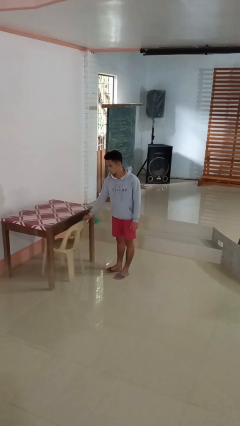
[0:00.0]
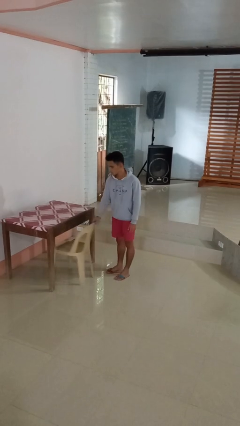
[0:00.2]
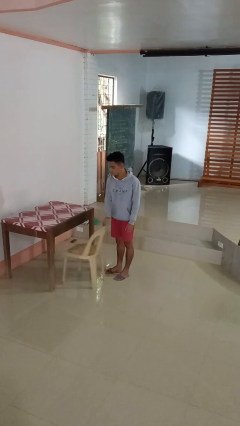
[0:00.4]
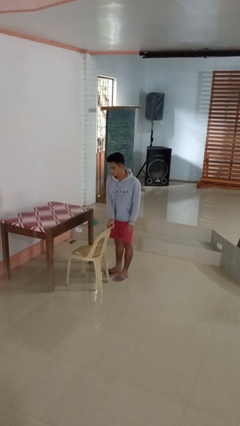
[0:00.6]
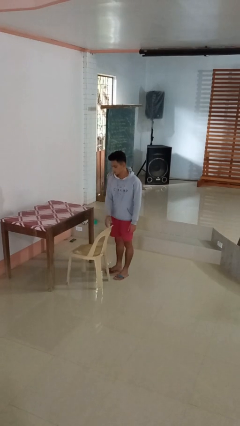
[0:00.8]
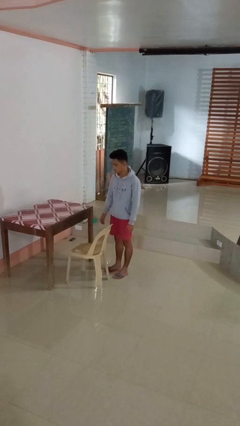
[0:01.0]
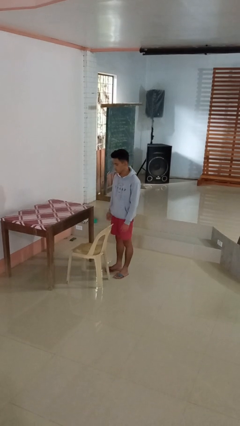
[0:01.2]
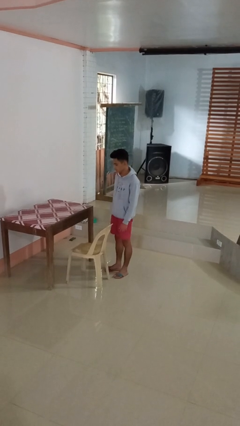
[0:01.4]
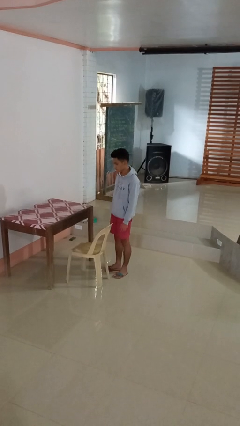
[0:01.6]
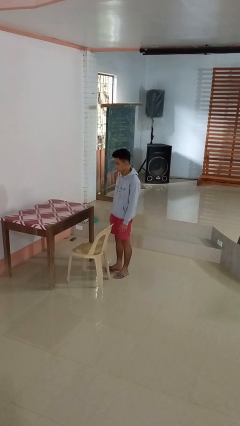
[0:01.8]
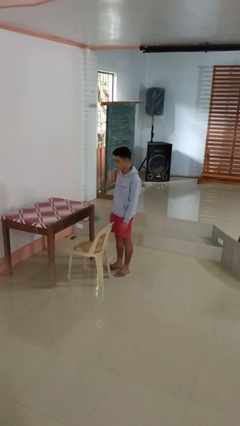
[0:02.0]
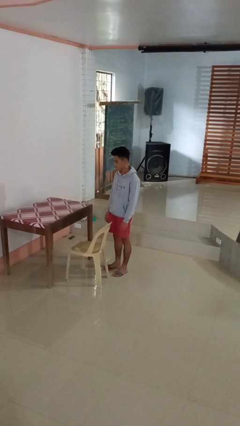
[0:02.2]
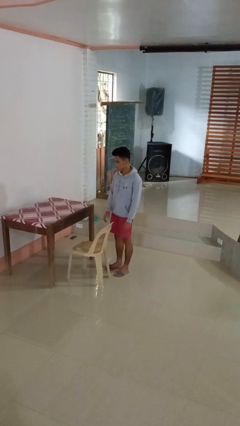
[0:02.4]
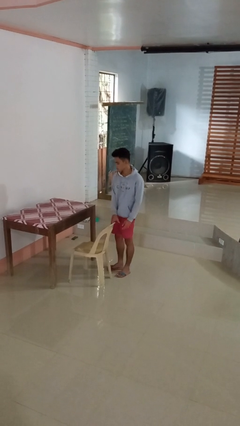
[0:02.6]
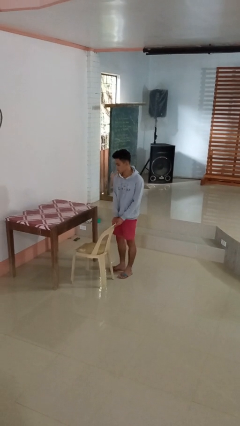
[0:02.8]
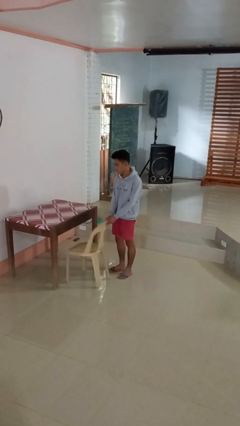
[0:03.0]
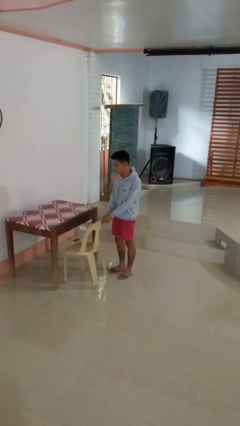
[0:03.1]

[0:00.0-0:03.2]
person pulls out chair

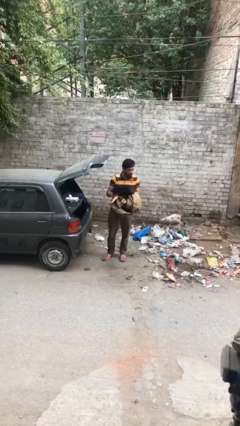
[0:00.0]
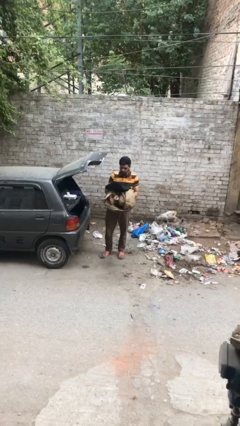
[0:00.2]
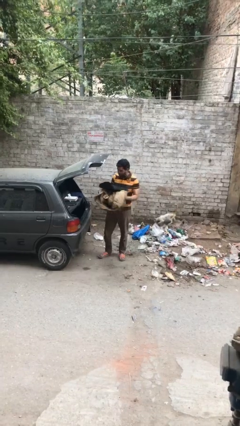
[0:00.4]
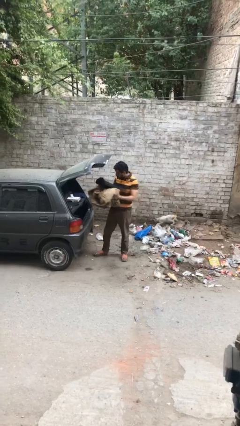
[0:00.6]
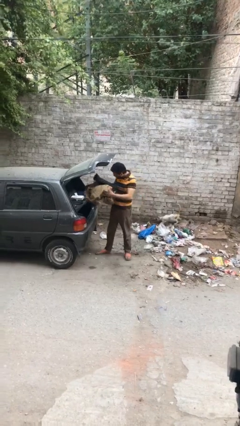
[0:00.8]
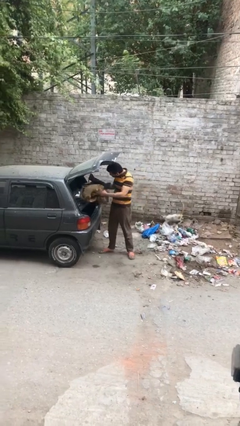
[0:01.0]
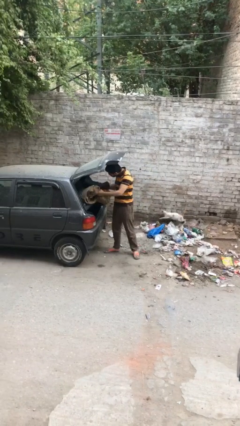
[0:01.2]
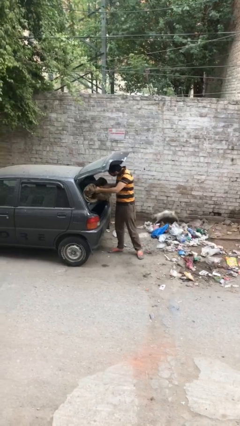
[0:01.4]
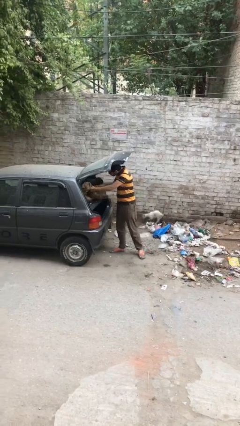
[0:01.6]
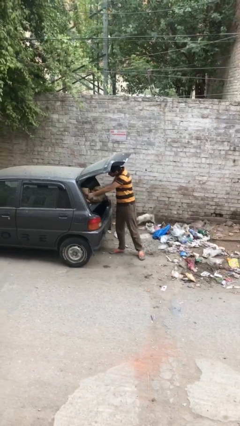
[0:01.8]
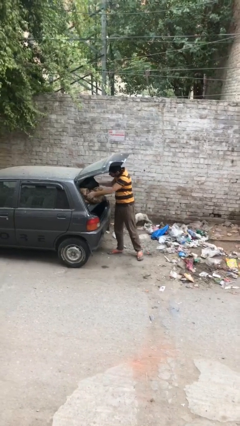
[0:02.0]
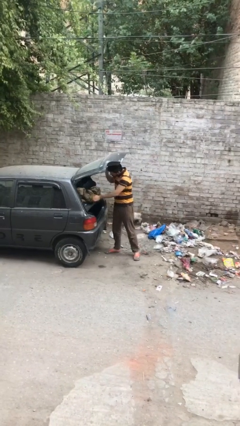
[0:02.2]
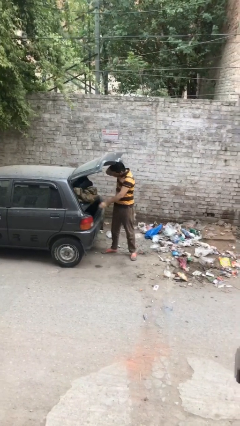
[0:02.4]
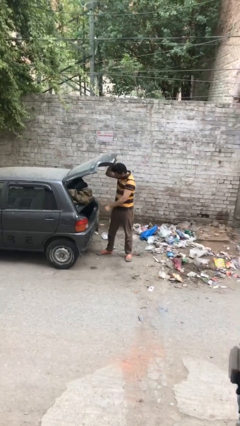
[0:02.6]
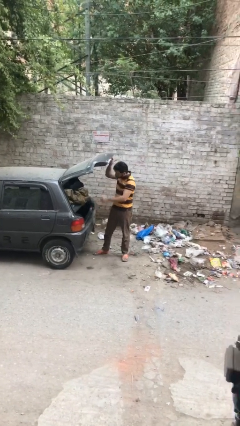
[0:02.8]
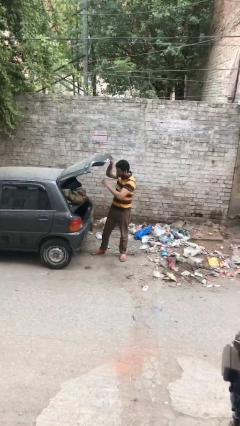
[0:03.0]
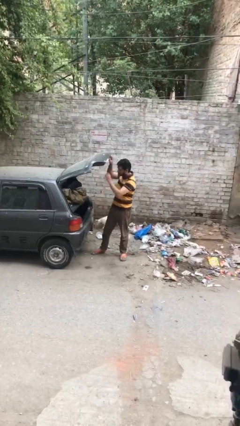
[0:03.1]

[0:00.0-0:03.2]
person loads car

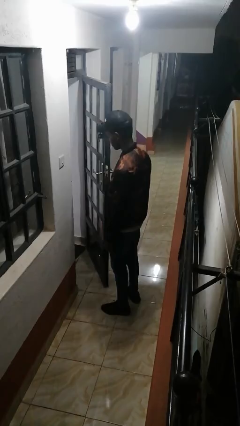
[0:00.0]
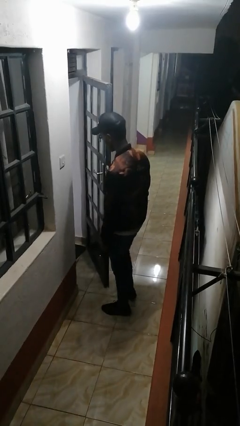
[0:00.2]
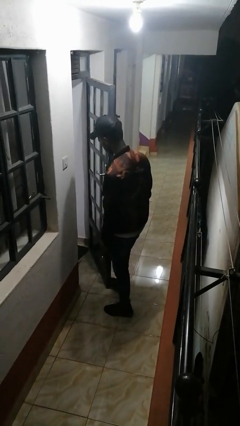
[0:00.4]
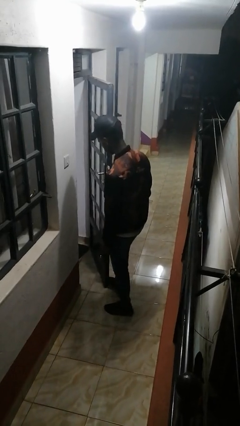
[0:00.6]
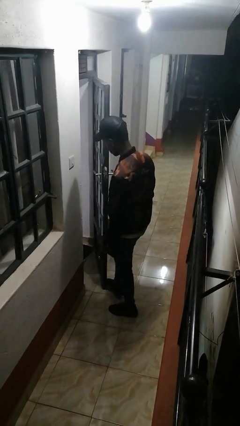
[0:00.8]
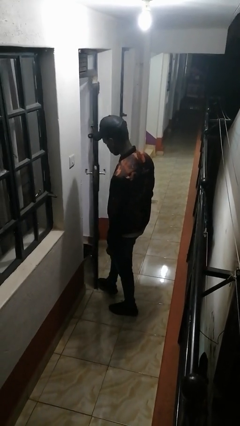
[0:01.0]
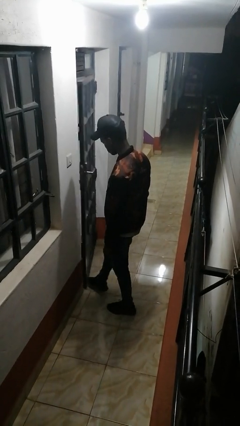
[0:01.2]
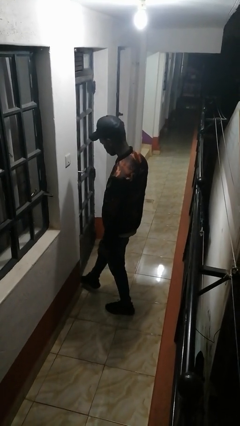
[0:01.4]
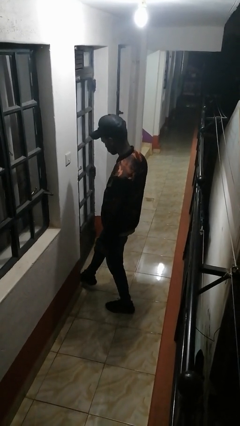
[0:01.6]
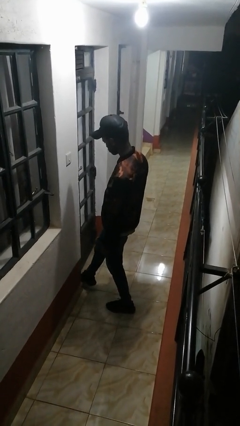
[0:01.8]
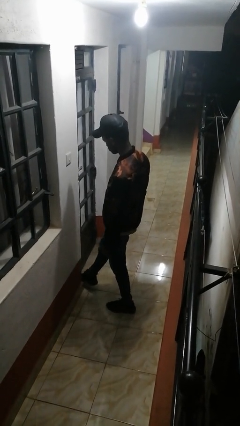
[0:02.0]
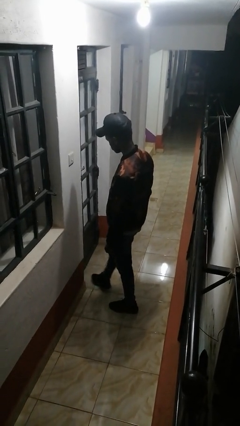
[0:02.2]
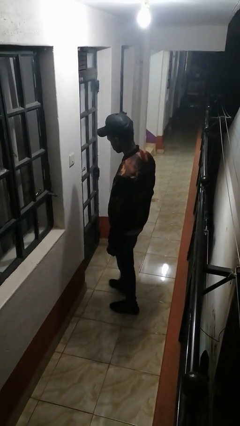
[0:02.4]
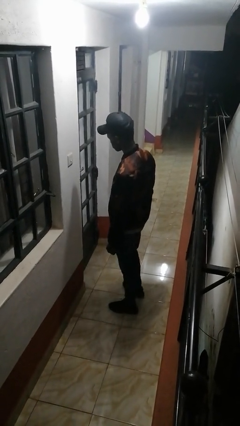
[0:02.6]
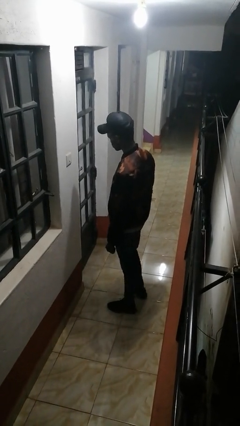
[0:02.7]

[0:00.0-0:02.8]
person closes door with foot

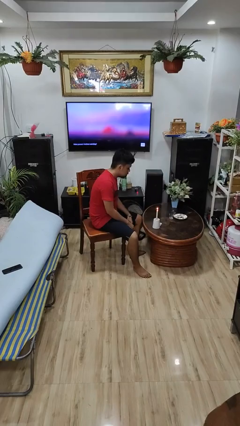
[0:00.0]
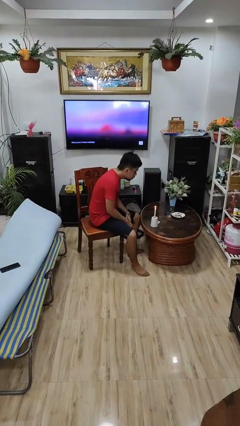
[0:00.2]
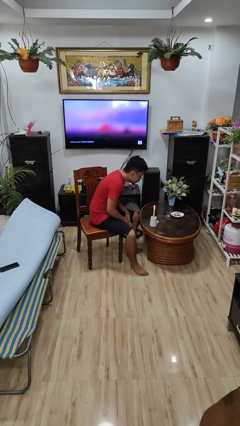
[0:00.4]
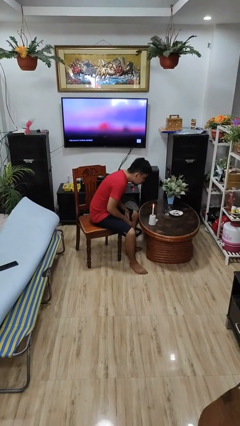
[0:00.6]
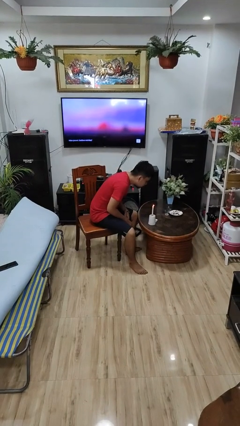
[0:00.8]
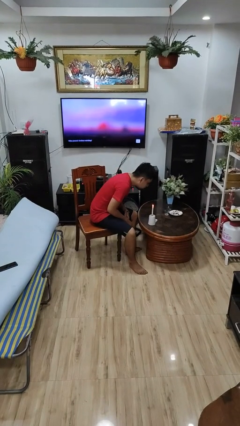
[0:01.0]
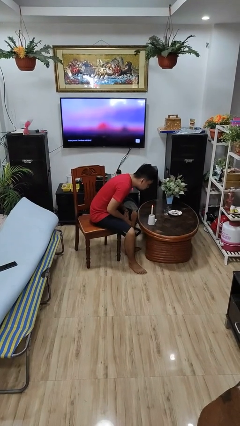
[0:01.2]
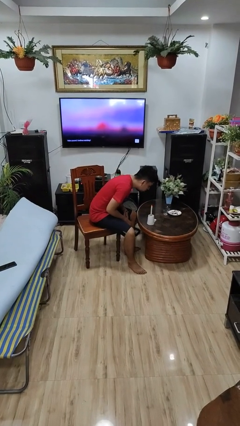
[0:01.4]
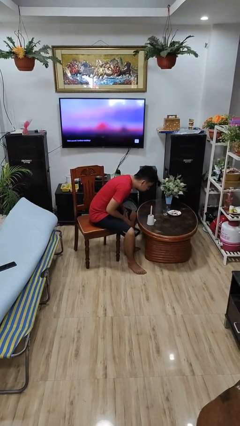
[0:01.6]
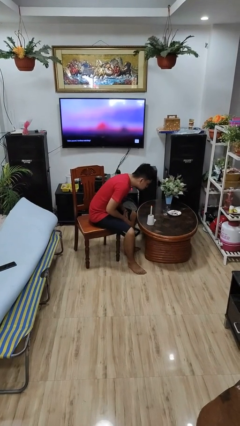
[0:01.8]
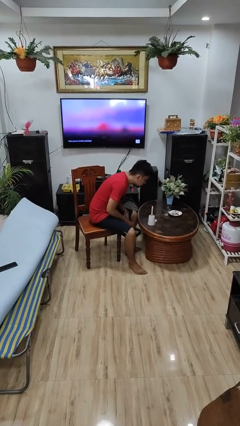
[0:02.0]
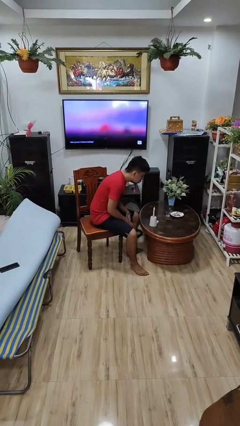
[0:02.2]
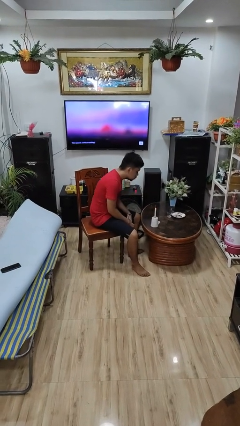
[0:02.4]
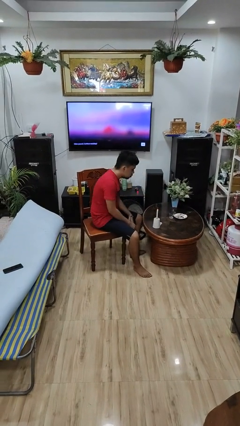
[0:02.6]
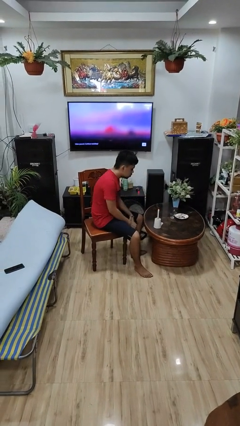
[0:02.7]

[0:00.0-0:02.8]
person extinguishes candle

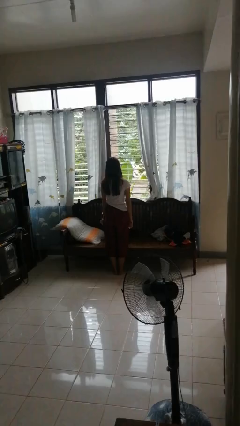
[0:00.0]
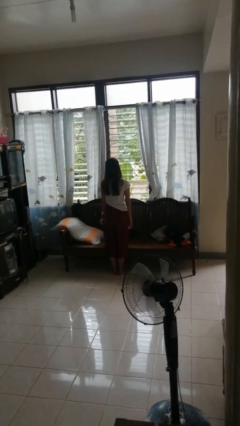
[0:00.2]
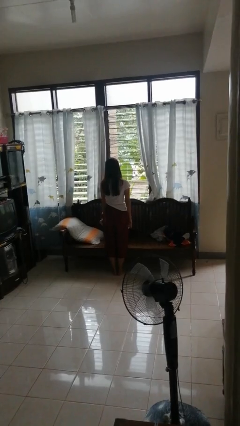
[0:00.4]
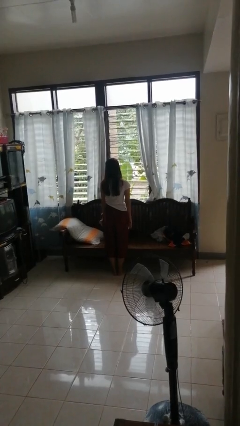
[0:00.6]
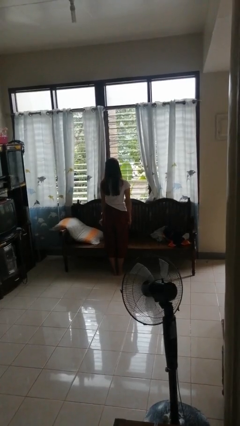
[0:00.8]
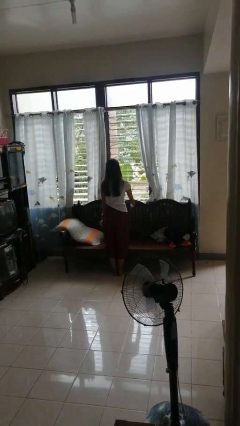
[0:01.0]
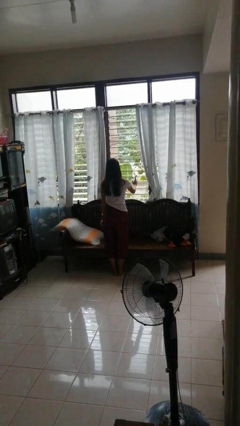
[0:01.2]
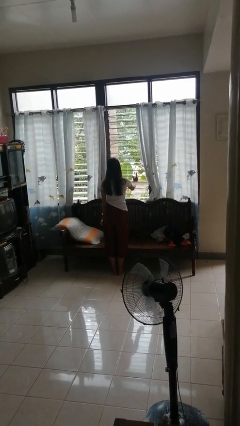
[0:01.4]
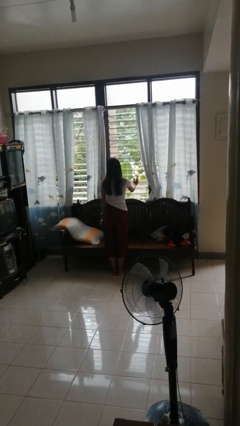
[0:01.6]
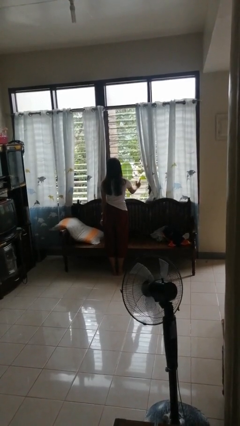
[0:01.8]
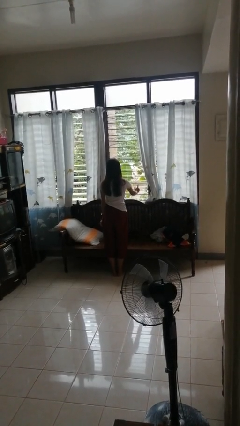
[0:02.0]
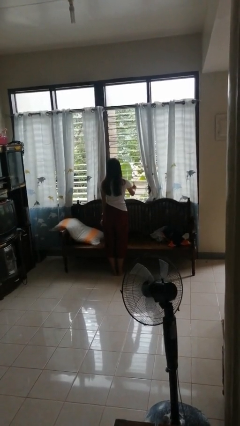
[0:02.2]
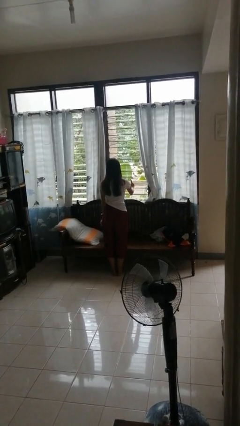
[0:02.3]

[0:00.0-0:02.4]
person sprays from bottle

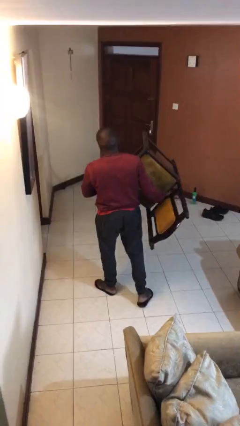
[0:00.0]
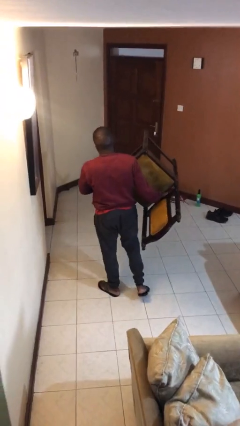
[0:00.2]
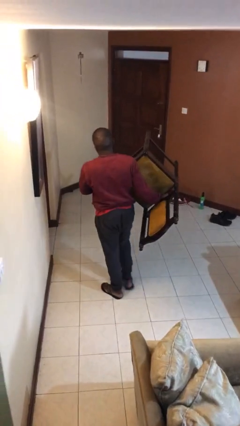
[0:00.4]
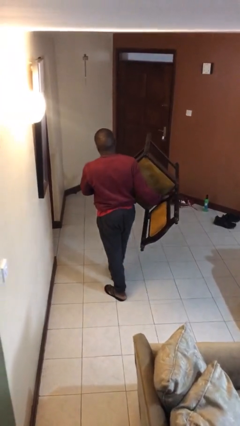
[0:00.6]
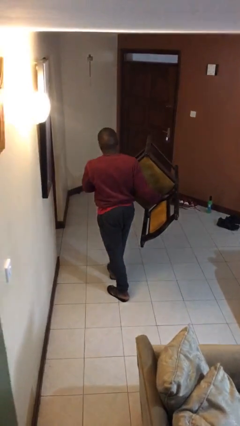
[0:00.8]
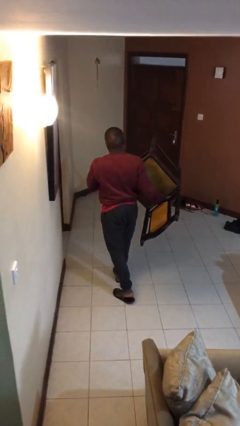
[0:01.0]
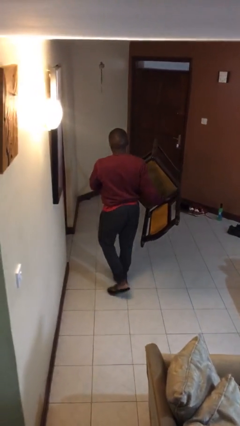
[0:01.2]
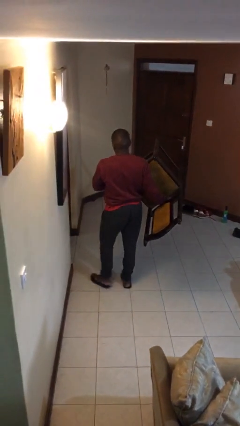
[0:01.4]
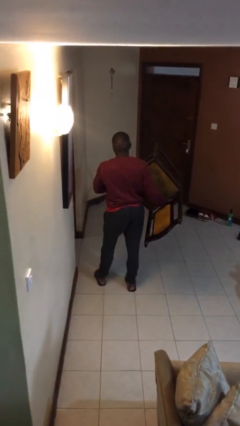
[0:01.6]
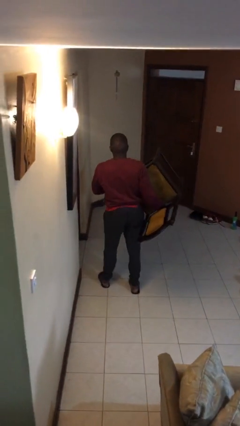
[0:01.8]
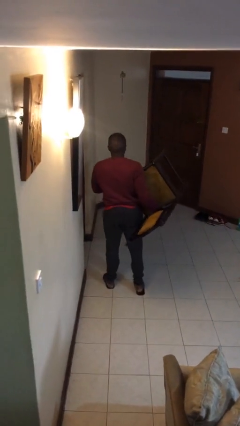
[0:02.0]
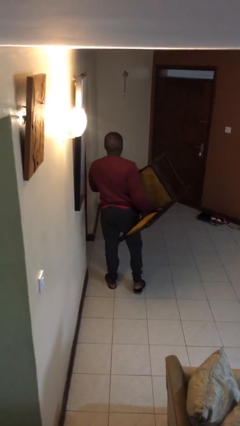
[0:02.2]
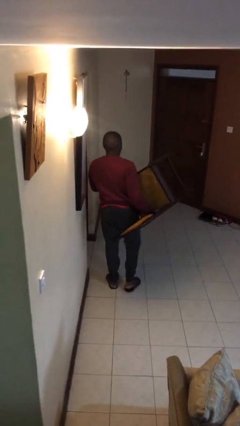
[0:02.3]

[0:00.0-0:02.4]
person carries furniture

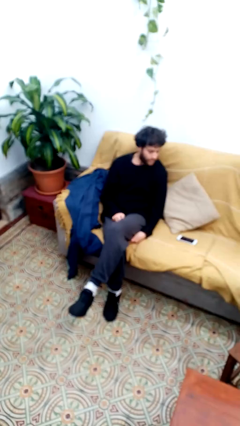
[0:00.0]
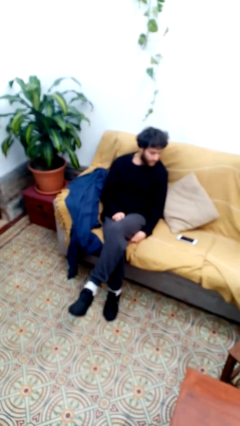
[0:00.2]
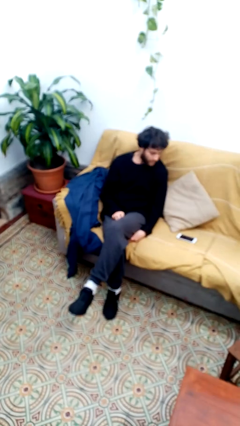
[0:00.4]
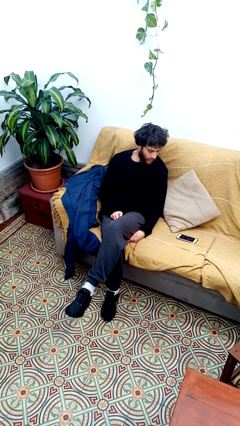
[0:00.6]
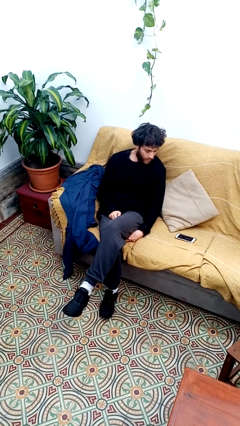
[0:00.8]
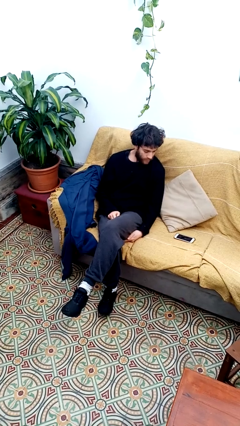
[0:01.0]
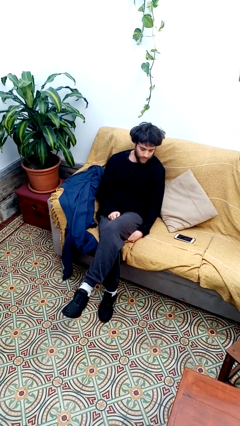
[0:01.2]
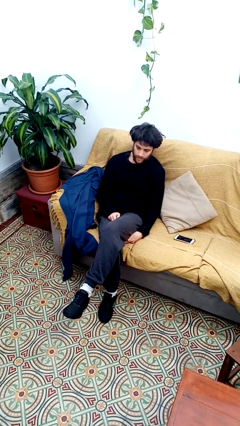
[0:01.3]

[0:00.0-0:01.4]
person claps hands
